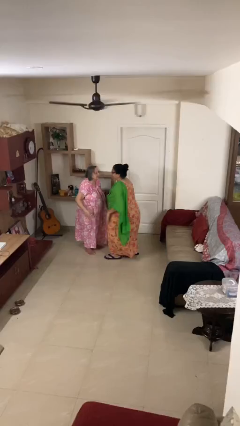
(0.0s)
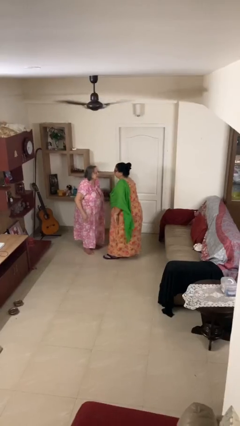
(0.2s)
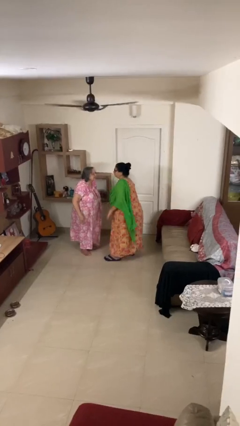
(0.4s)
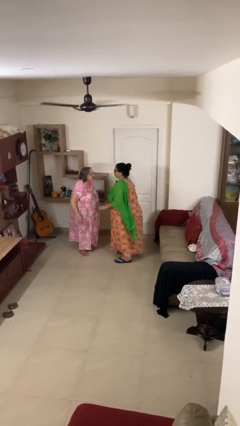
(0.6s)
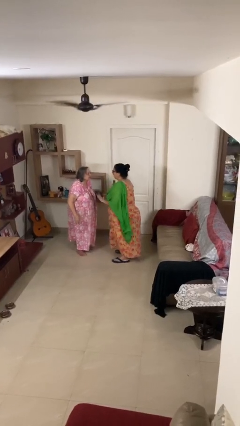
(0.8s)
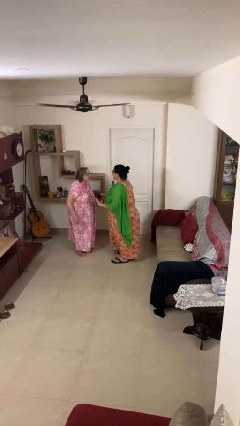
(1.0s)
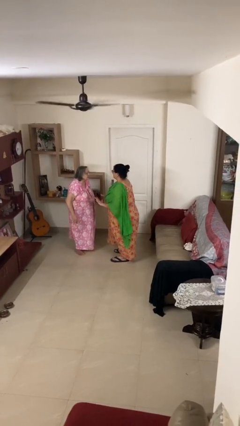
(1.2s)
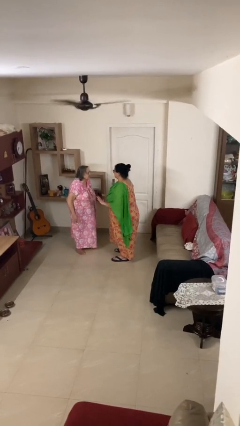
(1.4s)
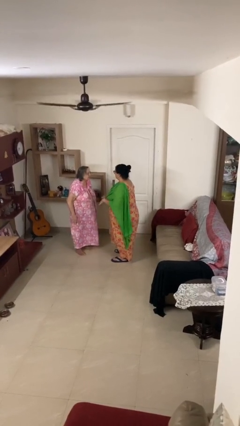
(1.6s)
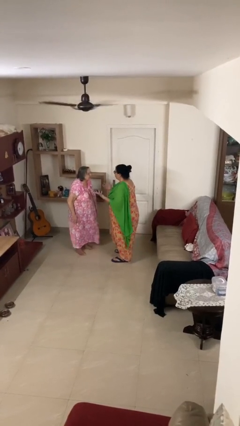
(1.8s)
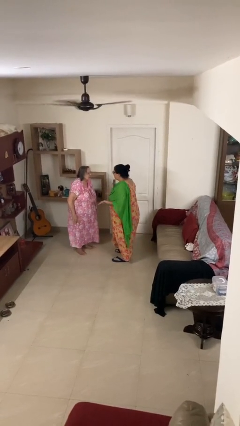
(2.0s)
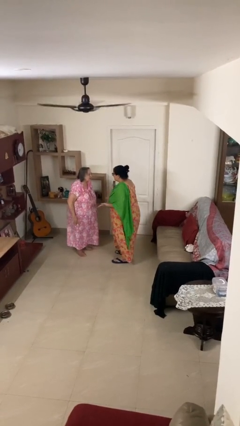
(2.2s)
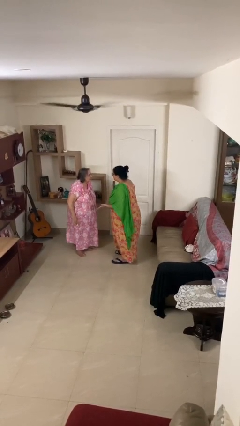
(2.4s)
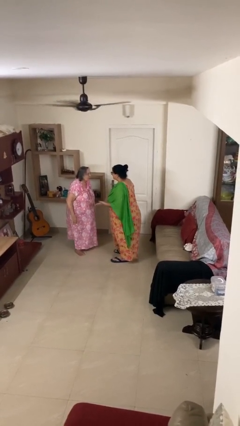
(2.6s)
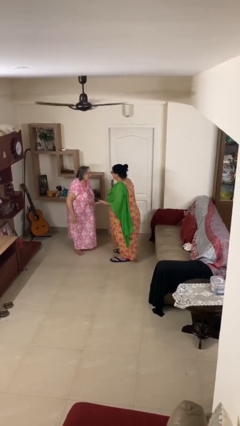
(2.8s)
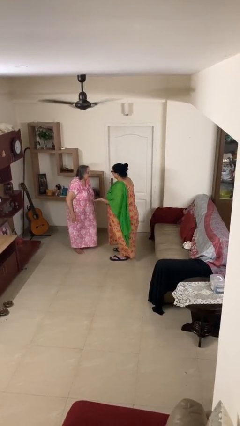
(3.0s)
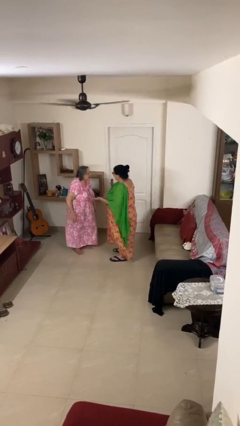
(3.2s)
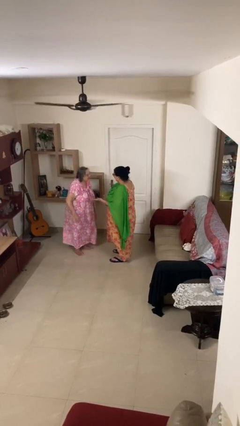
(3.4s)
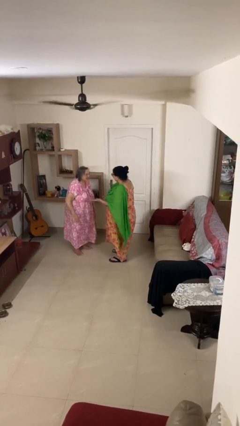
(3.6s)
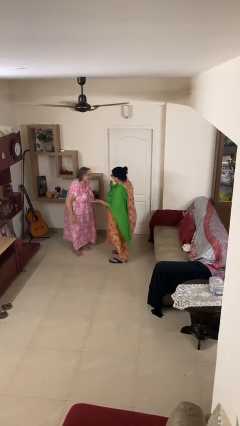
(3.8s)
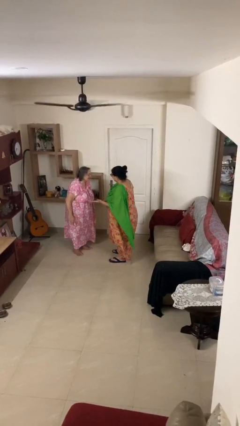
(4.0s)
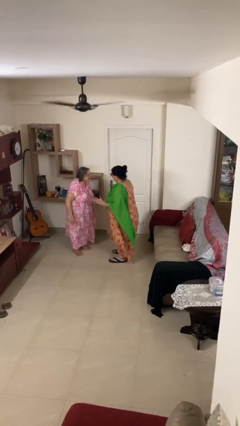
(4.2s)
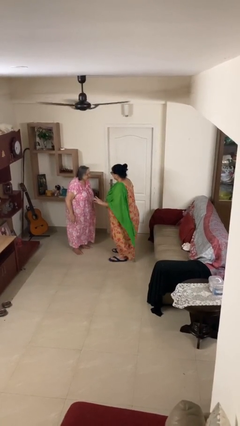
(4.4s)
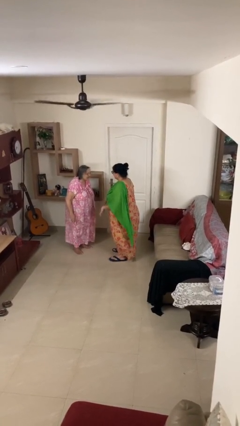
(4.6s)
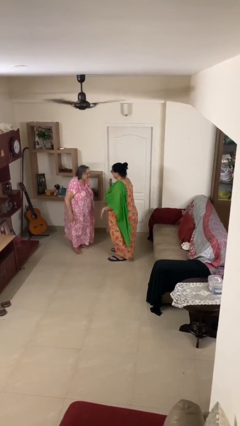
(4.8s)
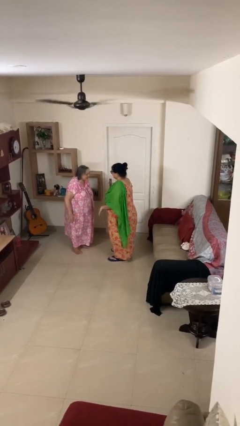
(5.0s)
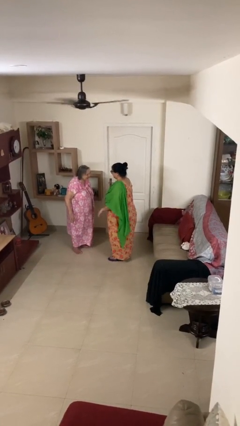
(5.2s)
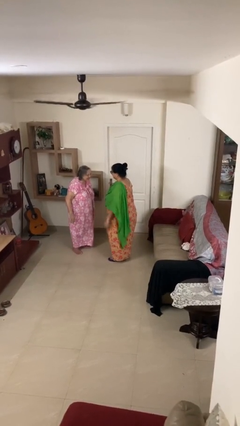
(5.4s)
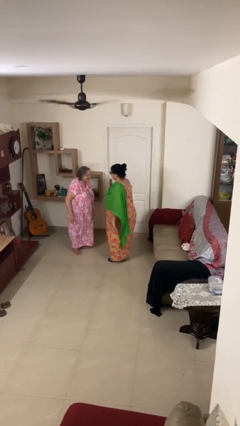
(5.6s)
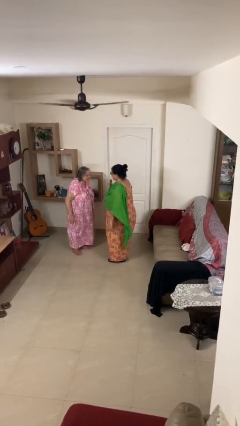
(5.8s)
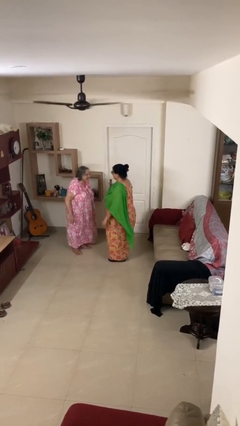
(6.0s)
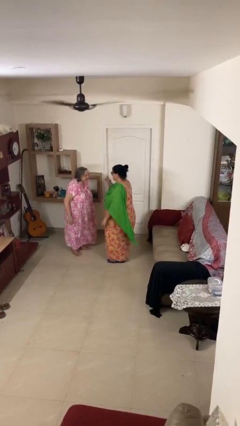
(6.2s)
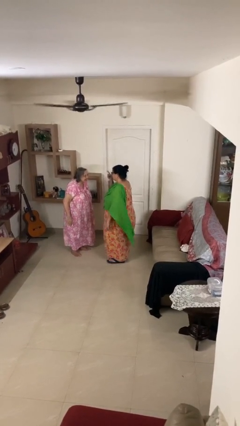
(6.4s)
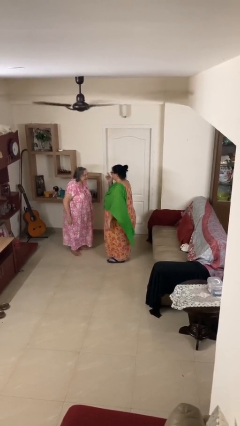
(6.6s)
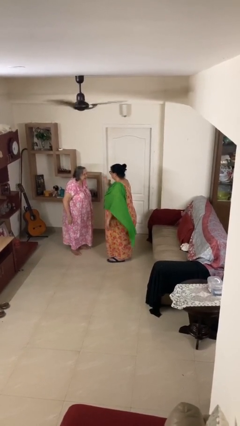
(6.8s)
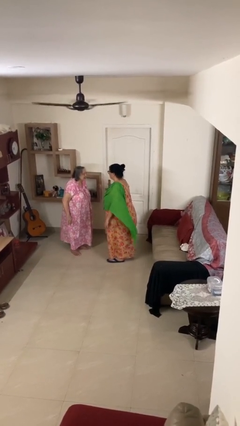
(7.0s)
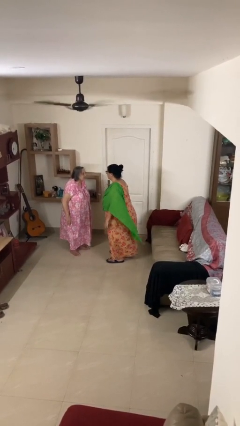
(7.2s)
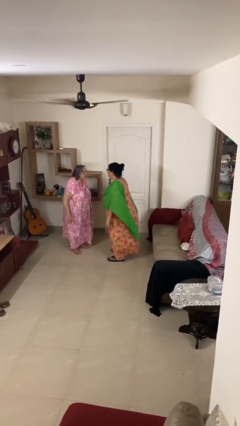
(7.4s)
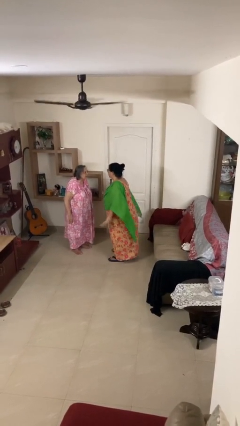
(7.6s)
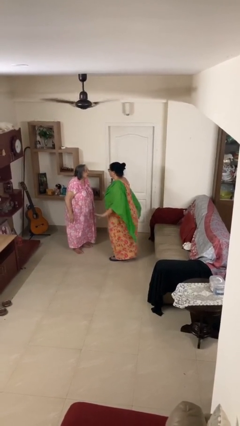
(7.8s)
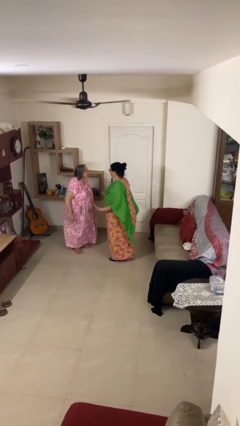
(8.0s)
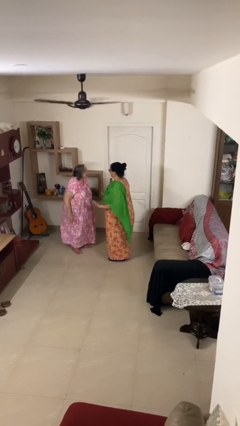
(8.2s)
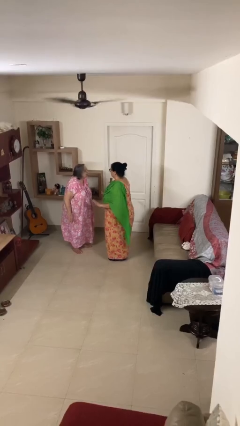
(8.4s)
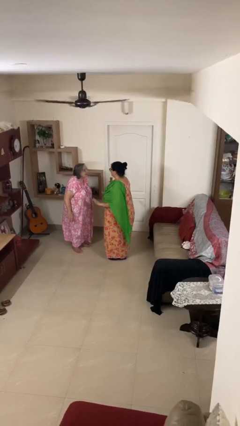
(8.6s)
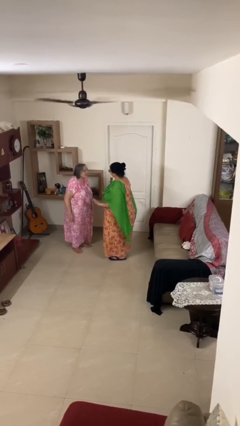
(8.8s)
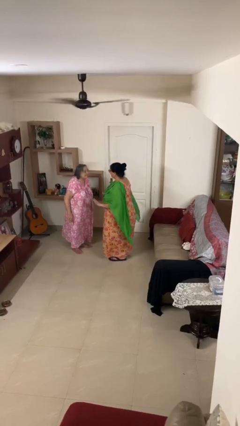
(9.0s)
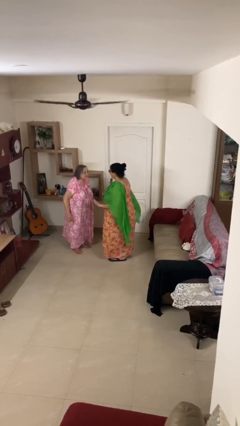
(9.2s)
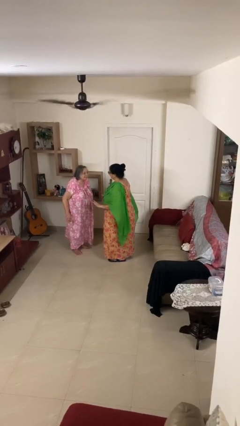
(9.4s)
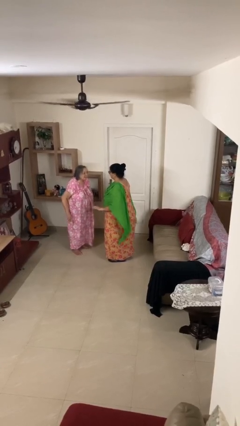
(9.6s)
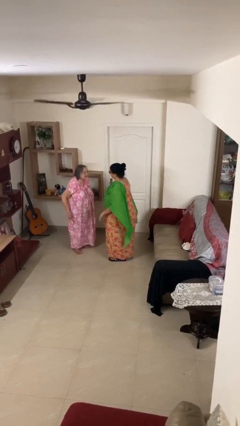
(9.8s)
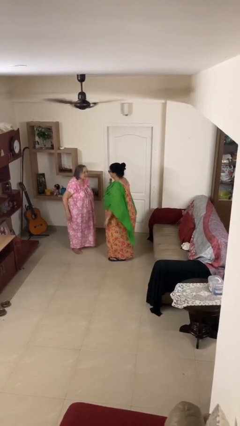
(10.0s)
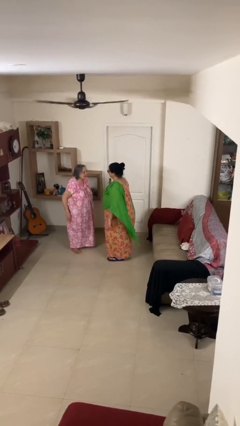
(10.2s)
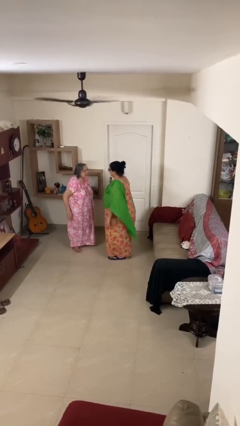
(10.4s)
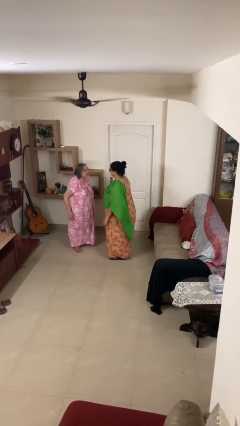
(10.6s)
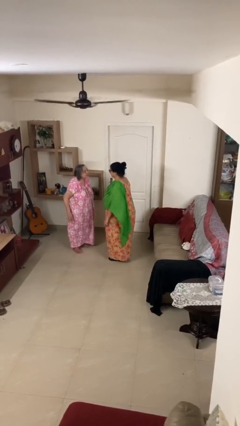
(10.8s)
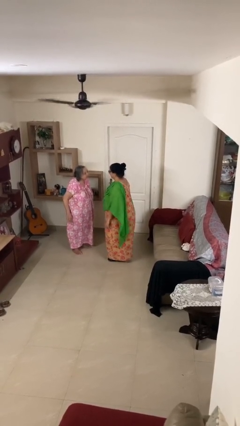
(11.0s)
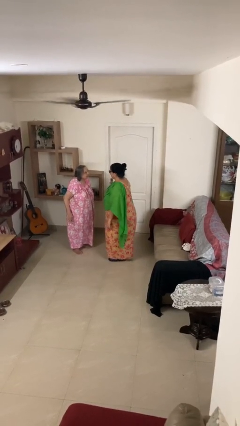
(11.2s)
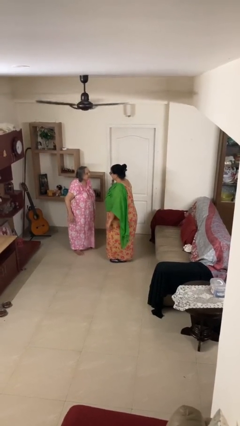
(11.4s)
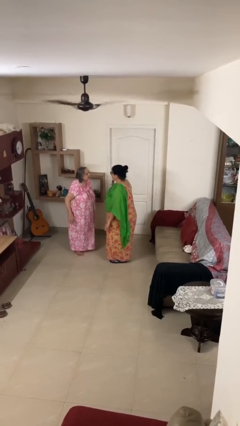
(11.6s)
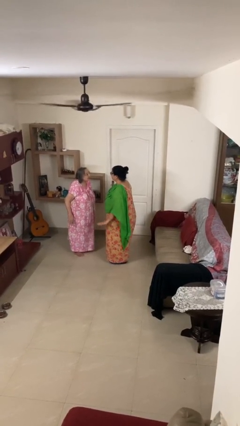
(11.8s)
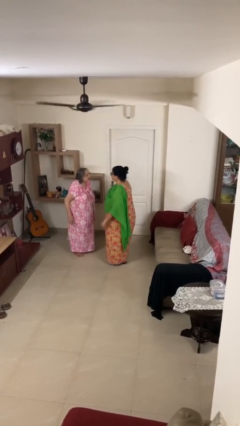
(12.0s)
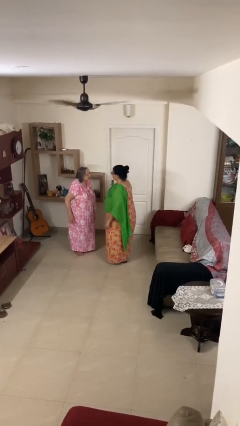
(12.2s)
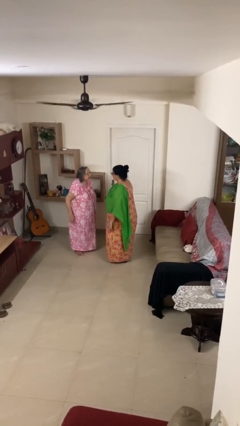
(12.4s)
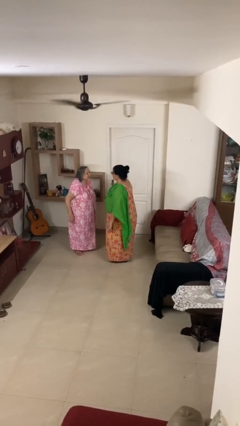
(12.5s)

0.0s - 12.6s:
person talks to person

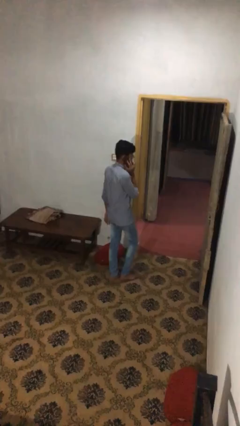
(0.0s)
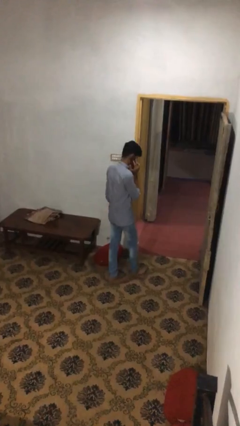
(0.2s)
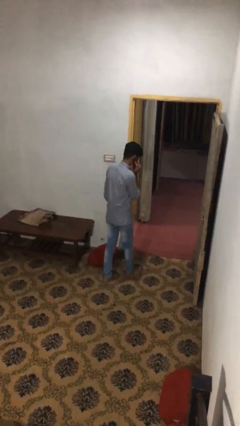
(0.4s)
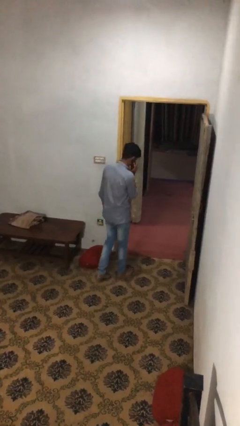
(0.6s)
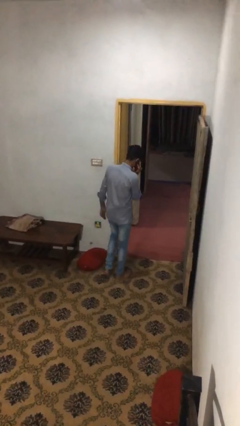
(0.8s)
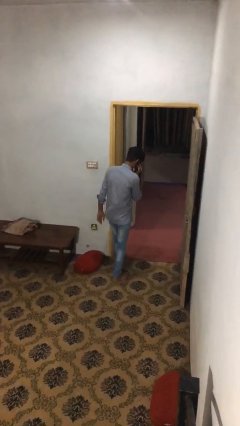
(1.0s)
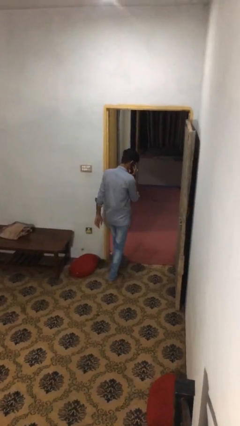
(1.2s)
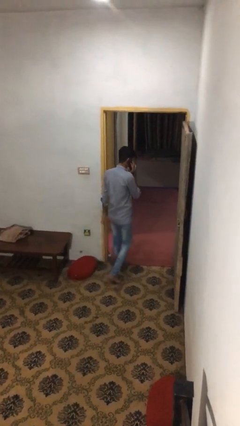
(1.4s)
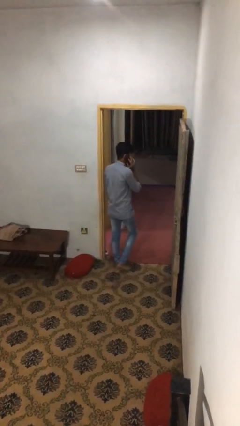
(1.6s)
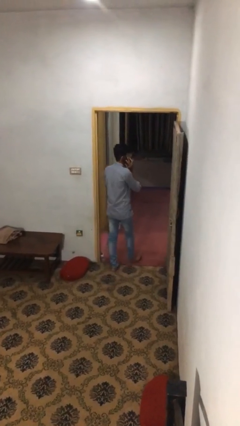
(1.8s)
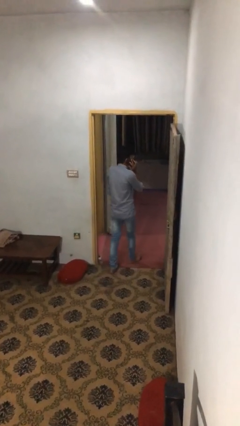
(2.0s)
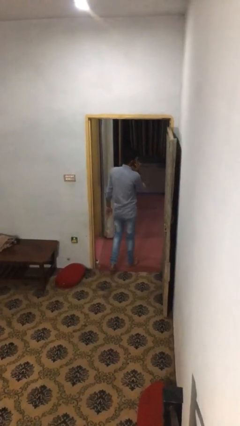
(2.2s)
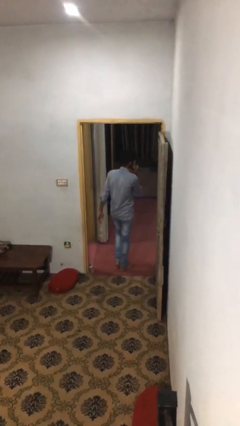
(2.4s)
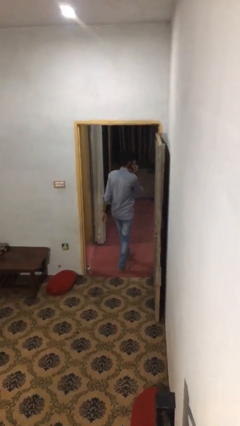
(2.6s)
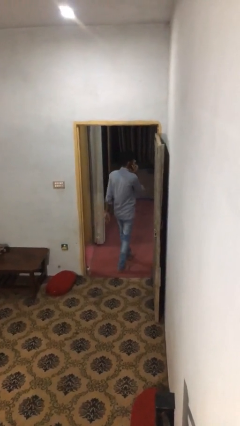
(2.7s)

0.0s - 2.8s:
person exits scene through structure

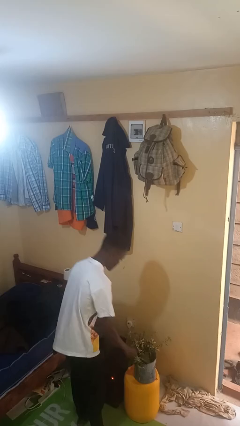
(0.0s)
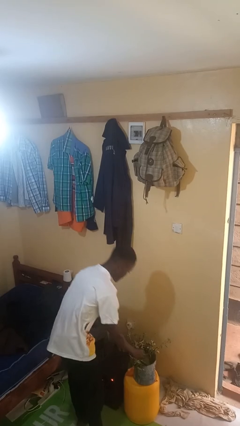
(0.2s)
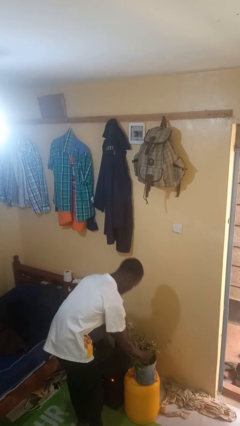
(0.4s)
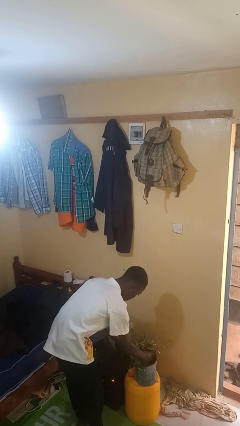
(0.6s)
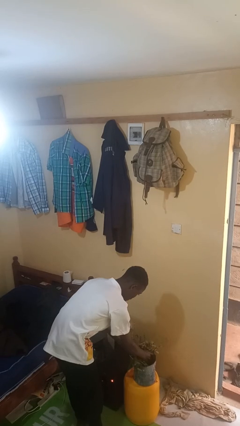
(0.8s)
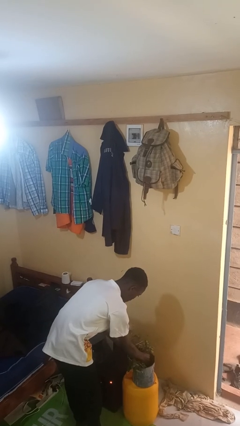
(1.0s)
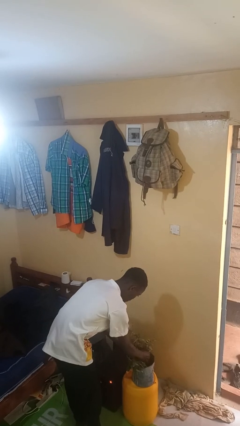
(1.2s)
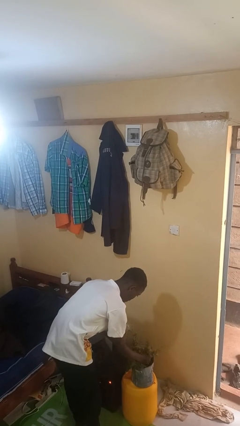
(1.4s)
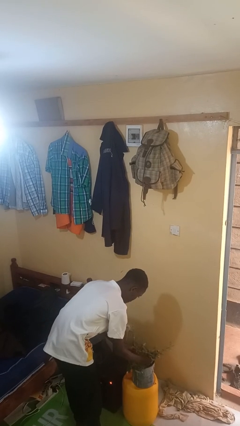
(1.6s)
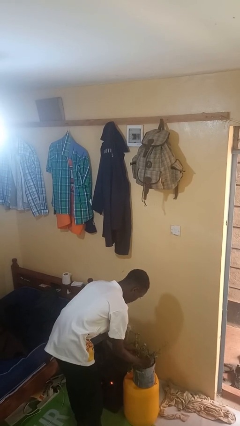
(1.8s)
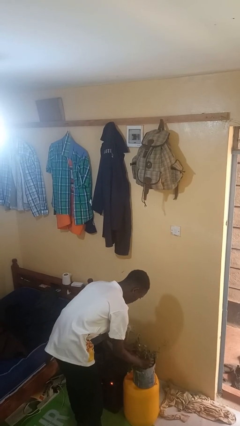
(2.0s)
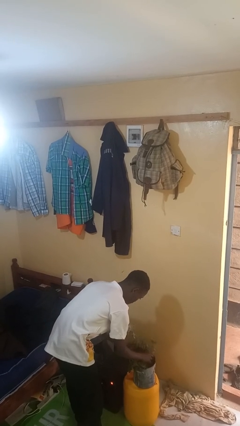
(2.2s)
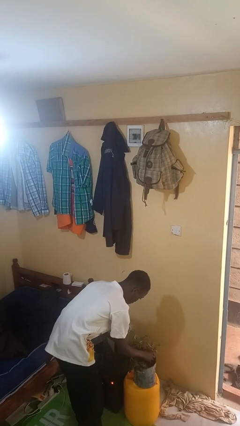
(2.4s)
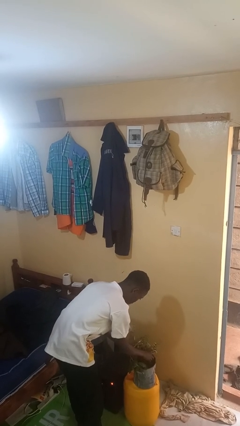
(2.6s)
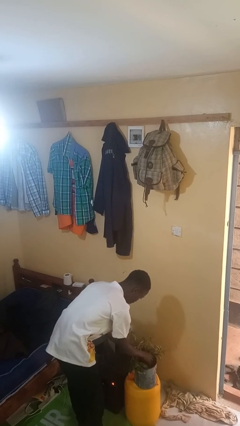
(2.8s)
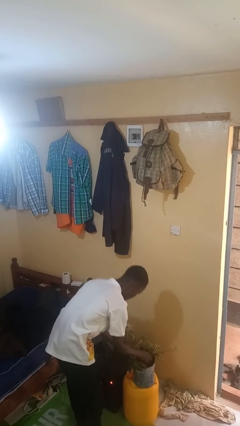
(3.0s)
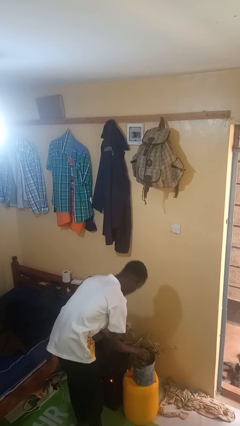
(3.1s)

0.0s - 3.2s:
person arranges flowers in vase
